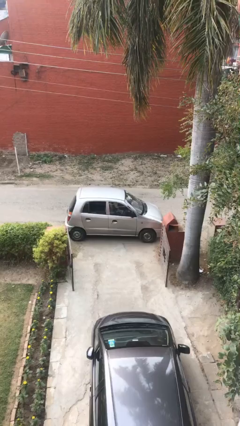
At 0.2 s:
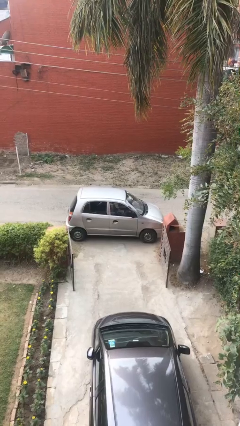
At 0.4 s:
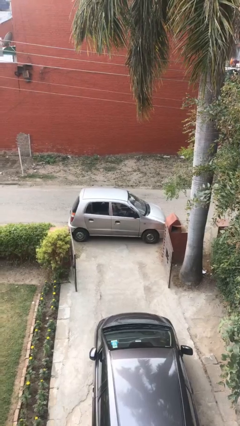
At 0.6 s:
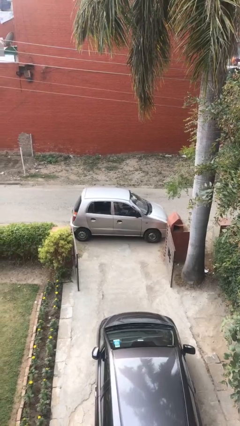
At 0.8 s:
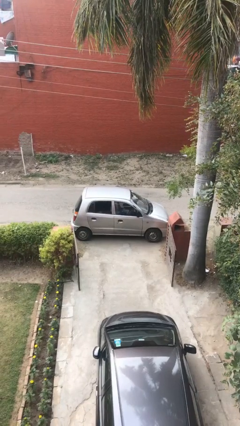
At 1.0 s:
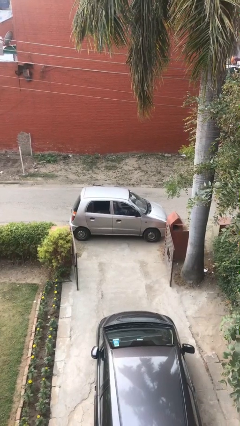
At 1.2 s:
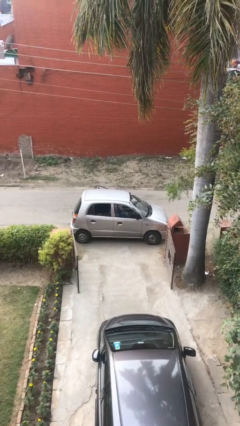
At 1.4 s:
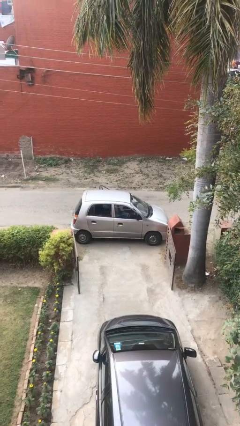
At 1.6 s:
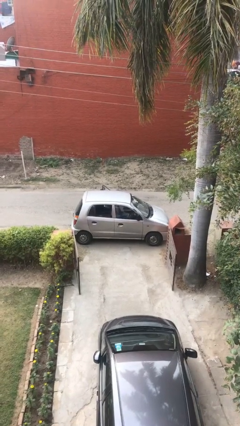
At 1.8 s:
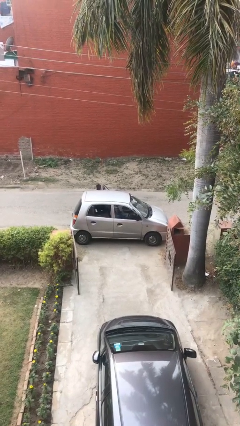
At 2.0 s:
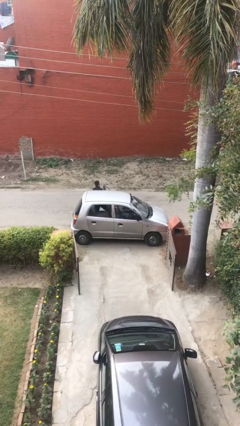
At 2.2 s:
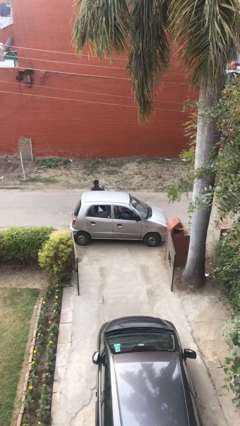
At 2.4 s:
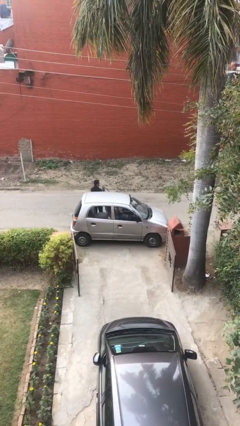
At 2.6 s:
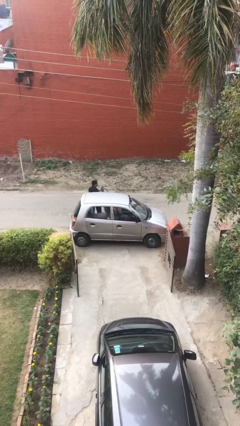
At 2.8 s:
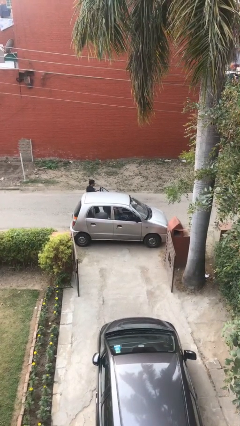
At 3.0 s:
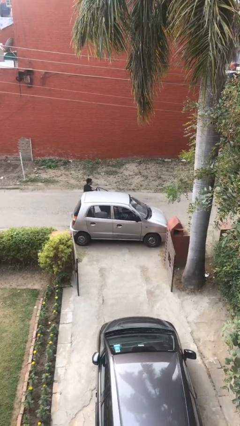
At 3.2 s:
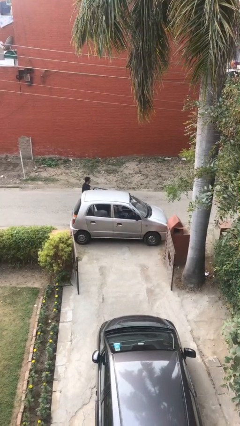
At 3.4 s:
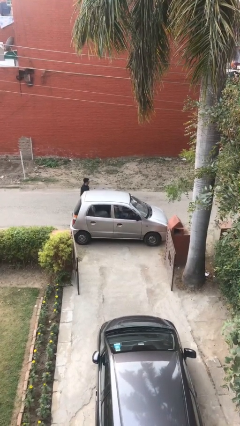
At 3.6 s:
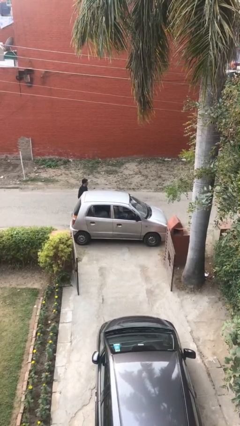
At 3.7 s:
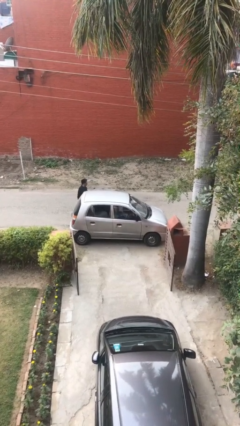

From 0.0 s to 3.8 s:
car drops off person

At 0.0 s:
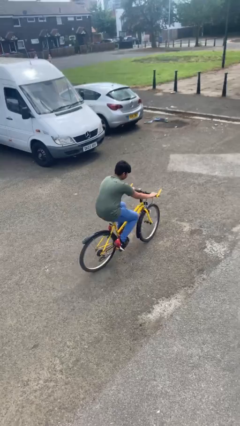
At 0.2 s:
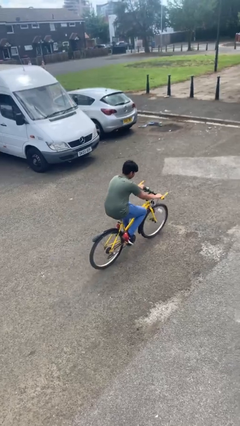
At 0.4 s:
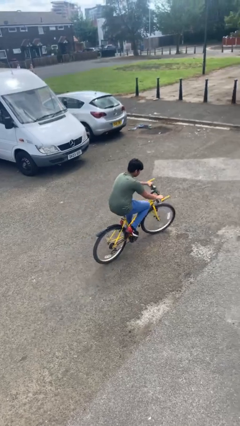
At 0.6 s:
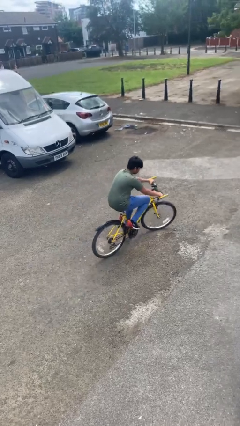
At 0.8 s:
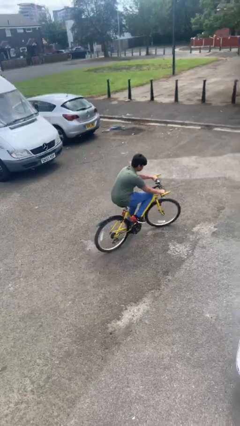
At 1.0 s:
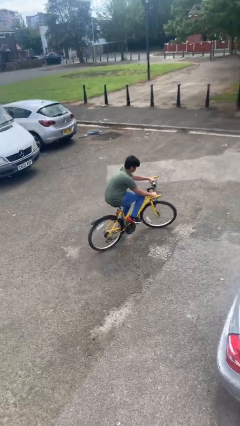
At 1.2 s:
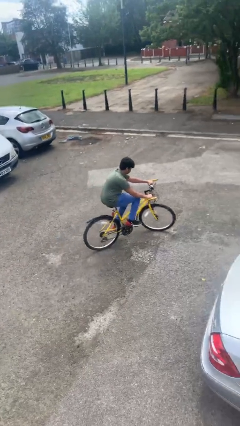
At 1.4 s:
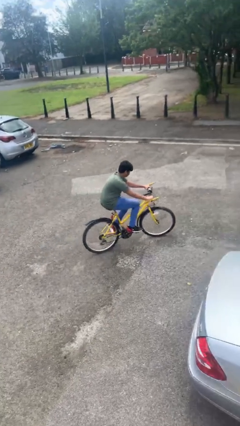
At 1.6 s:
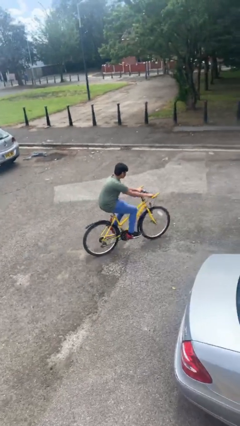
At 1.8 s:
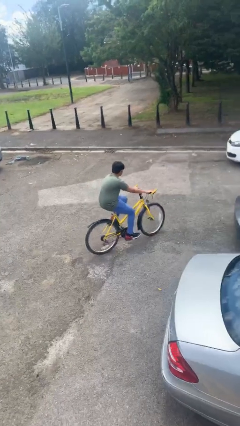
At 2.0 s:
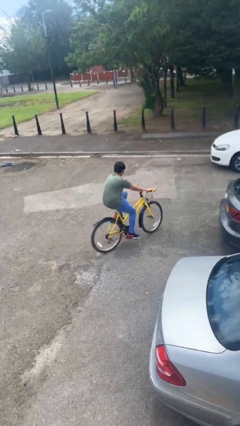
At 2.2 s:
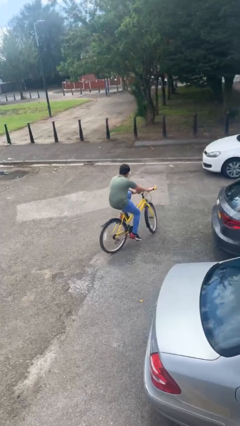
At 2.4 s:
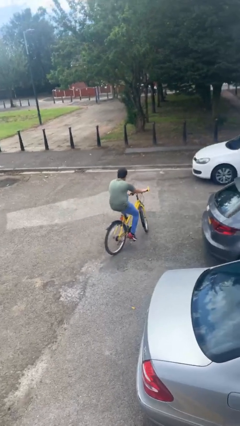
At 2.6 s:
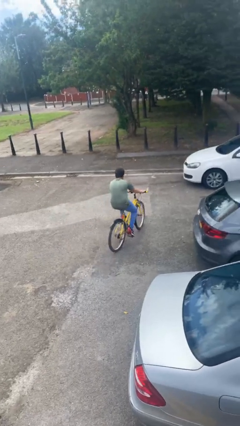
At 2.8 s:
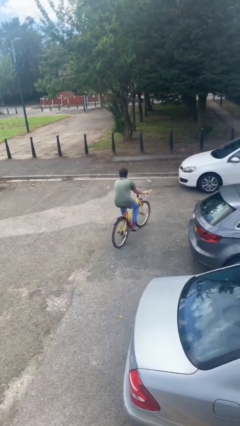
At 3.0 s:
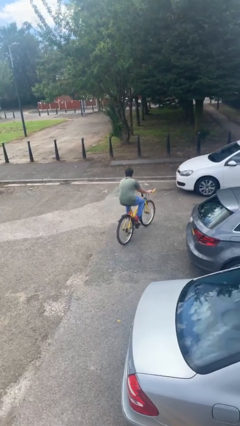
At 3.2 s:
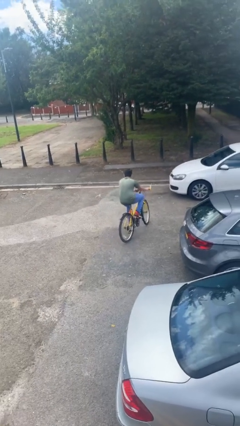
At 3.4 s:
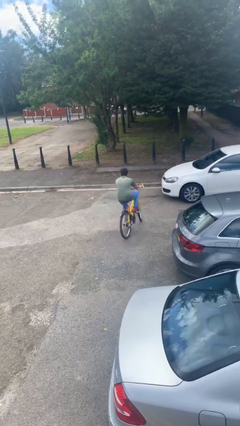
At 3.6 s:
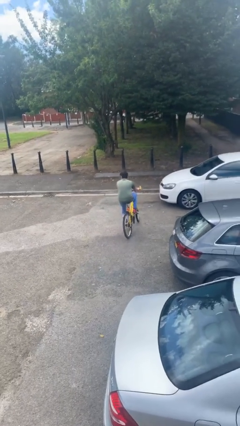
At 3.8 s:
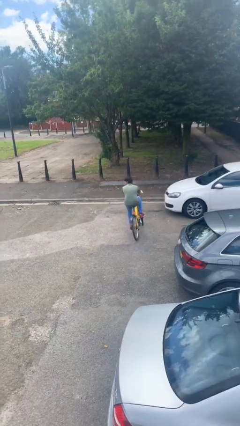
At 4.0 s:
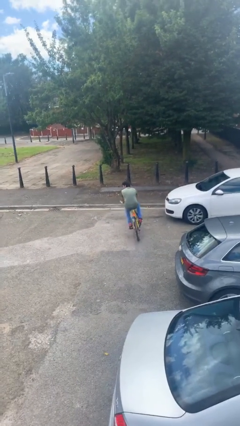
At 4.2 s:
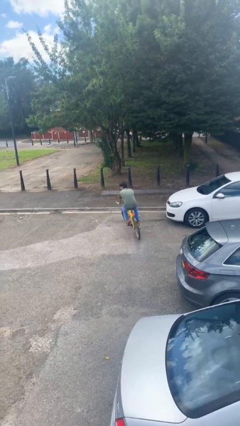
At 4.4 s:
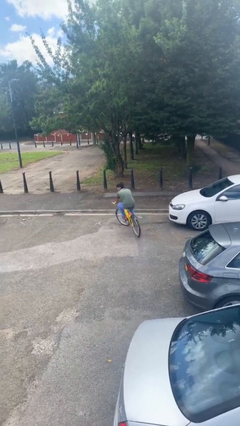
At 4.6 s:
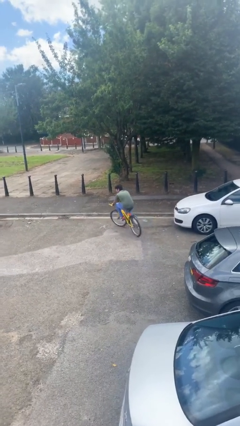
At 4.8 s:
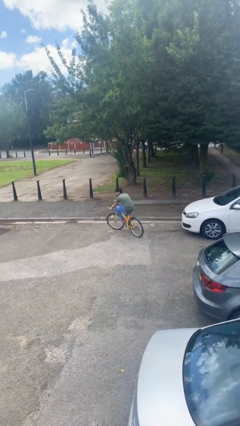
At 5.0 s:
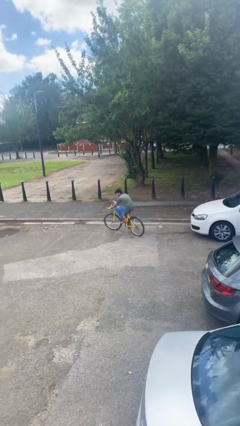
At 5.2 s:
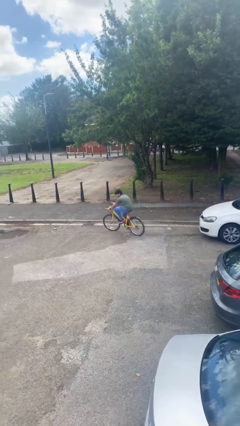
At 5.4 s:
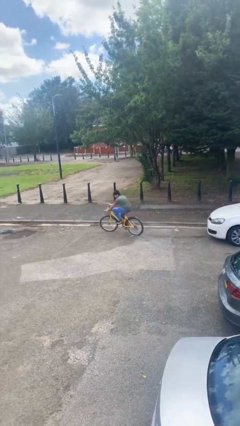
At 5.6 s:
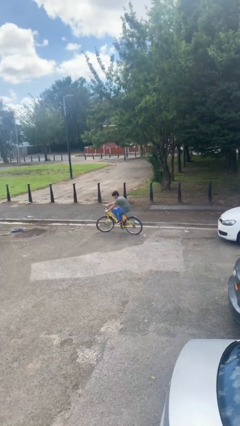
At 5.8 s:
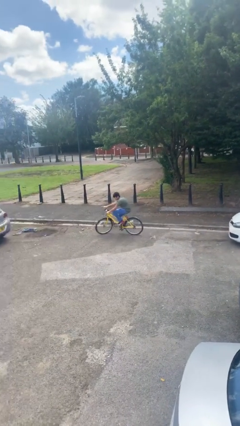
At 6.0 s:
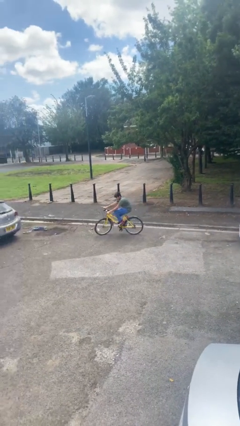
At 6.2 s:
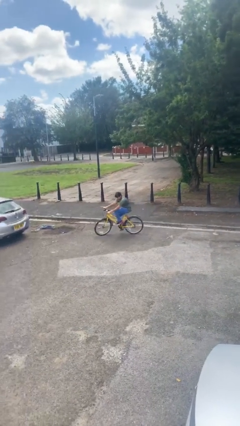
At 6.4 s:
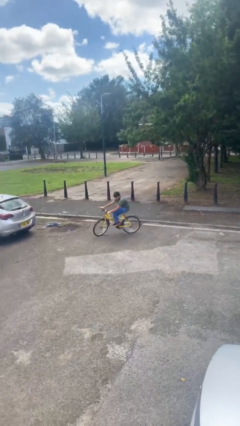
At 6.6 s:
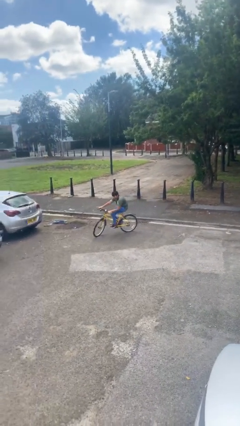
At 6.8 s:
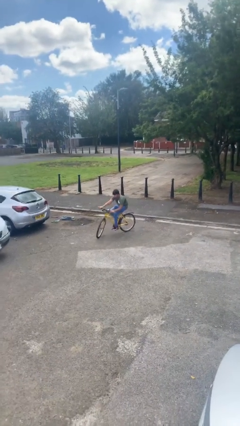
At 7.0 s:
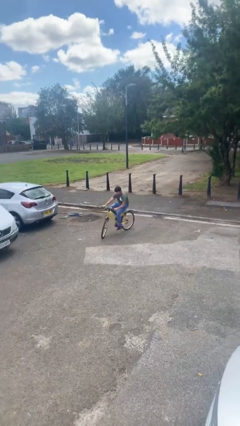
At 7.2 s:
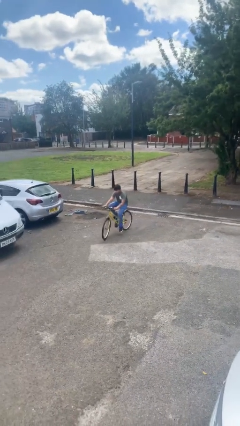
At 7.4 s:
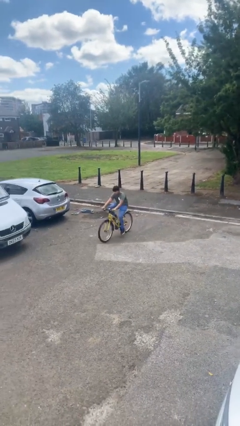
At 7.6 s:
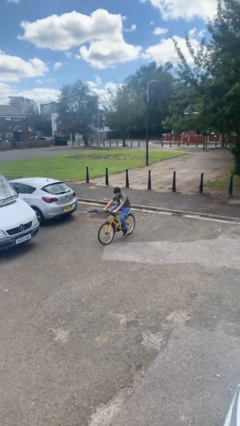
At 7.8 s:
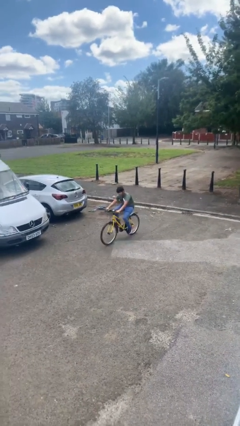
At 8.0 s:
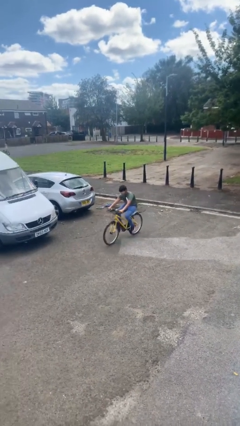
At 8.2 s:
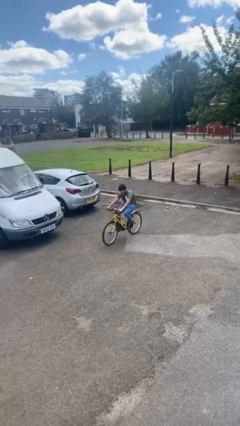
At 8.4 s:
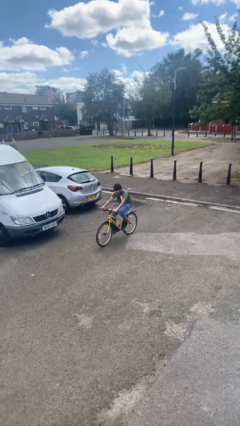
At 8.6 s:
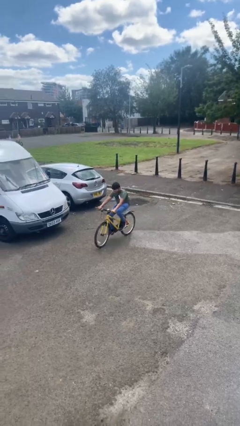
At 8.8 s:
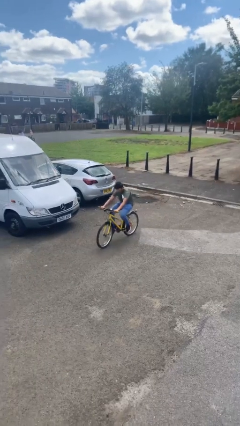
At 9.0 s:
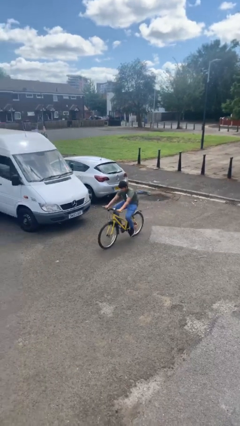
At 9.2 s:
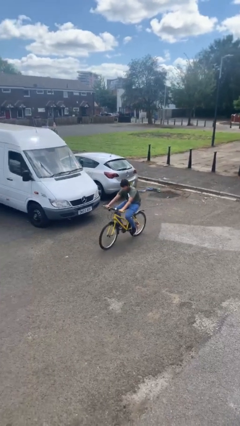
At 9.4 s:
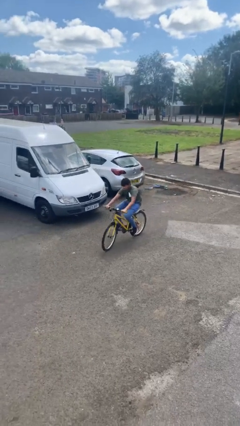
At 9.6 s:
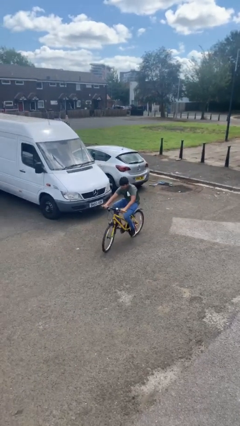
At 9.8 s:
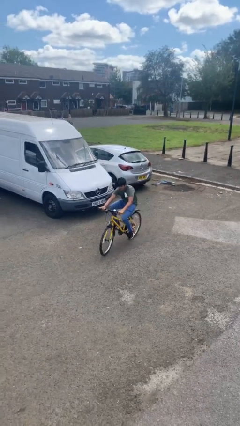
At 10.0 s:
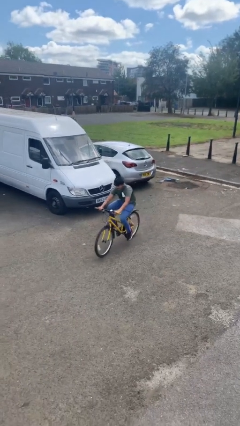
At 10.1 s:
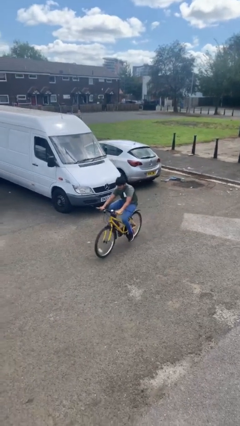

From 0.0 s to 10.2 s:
person rides bicycle

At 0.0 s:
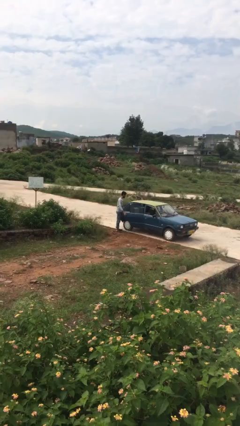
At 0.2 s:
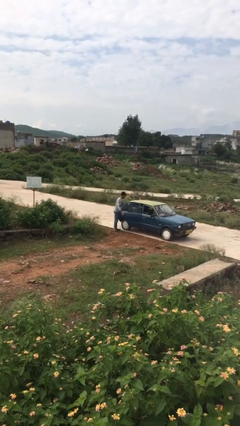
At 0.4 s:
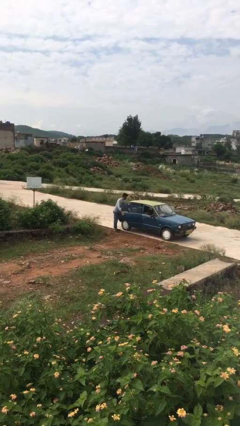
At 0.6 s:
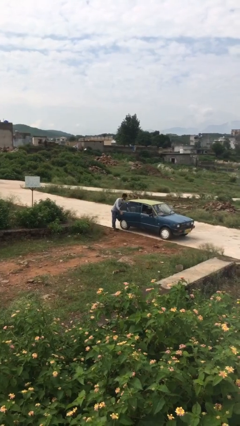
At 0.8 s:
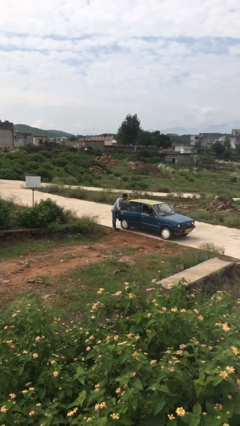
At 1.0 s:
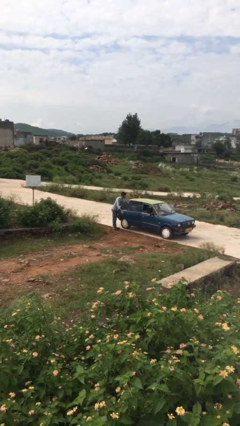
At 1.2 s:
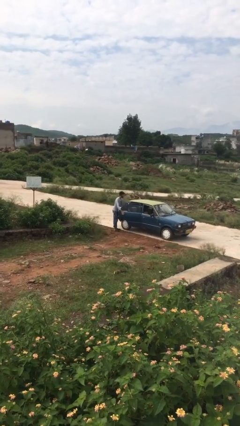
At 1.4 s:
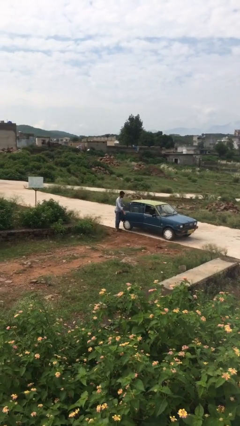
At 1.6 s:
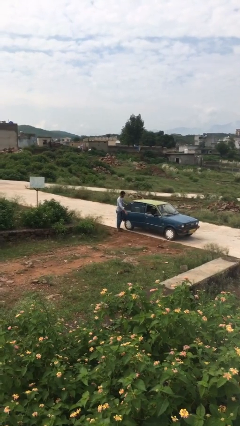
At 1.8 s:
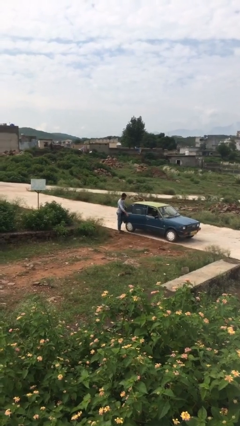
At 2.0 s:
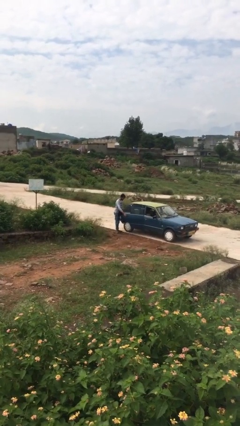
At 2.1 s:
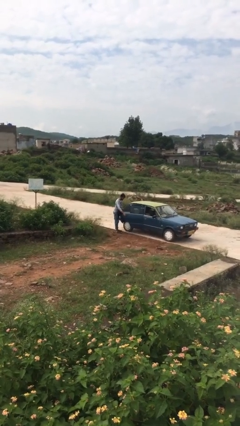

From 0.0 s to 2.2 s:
person unloads car

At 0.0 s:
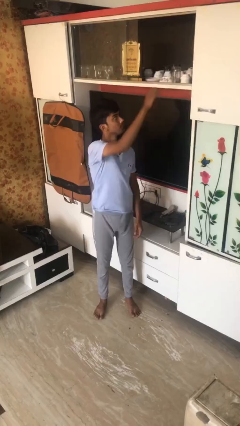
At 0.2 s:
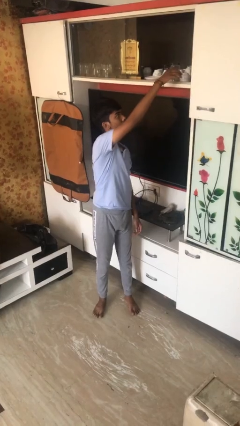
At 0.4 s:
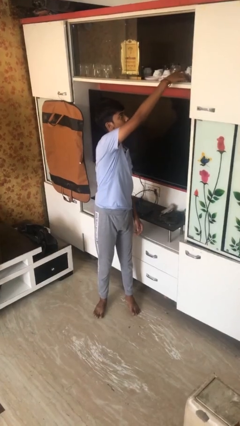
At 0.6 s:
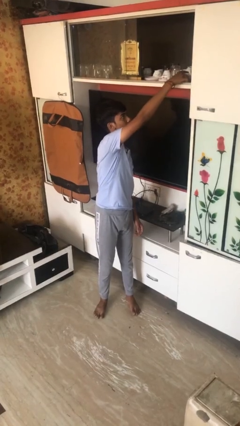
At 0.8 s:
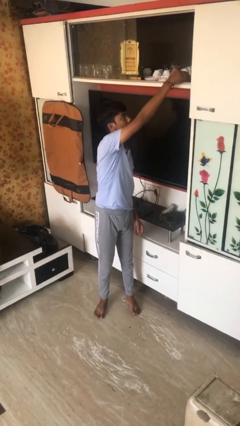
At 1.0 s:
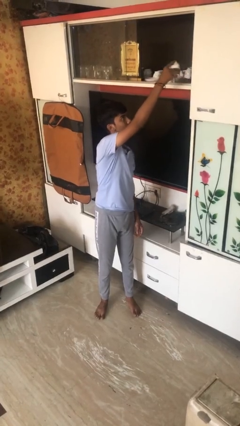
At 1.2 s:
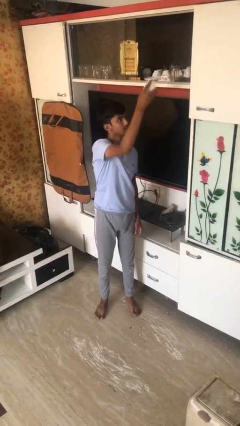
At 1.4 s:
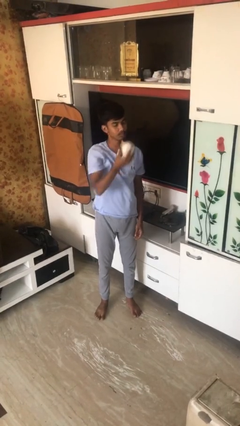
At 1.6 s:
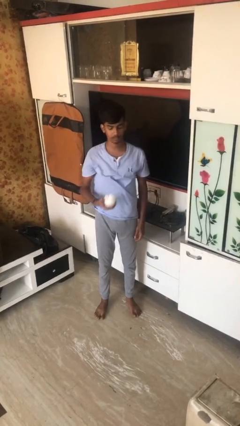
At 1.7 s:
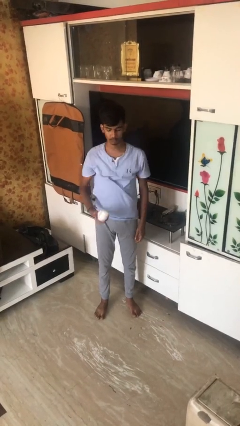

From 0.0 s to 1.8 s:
person takes object from cabinet
